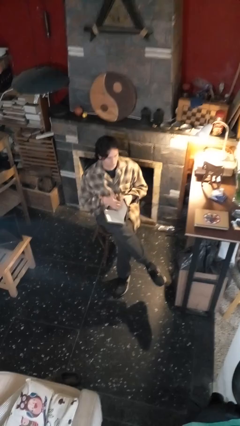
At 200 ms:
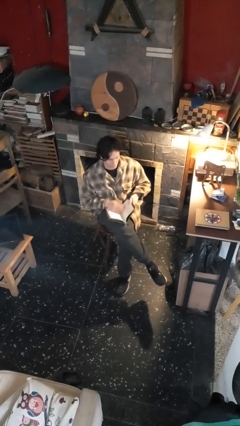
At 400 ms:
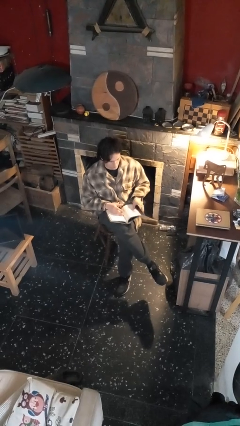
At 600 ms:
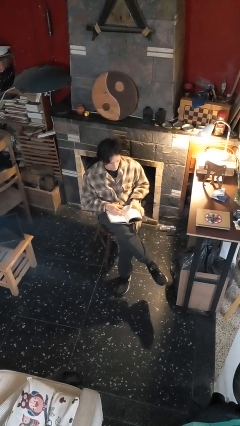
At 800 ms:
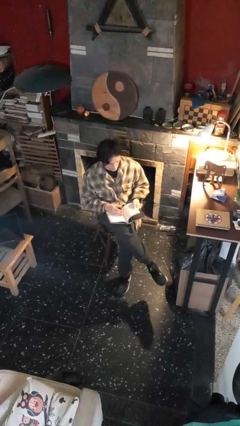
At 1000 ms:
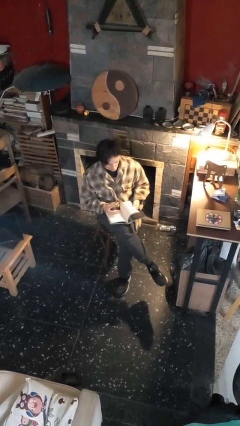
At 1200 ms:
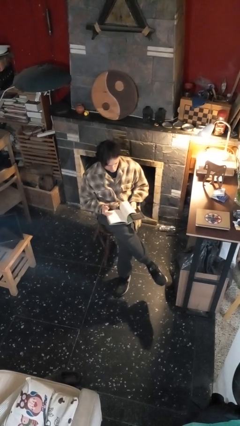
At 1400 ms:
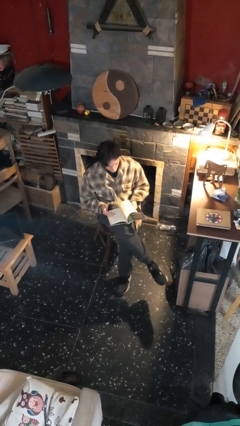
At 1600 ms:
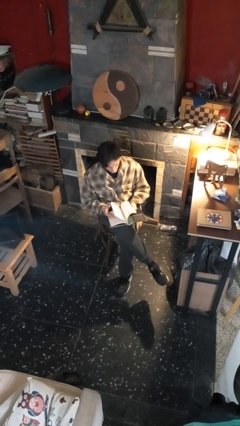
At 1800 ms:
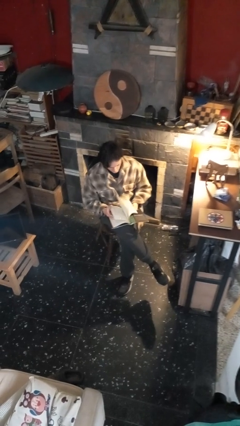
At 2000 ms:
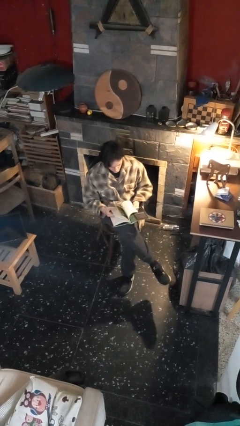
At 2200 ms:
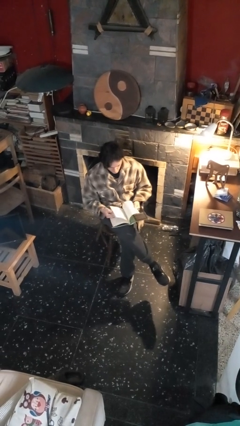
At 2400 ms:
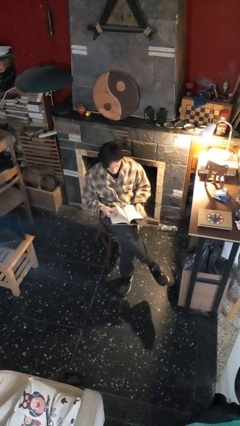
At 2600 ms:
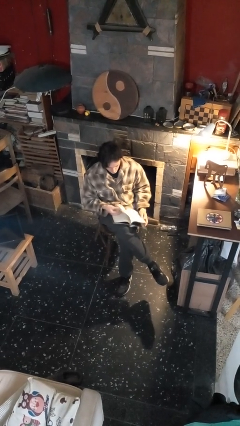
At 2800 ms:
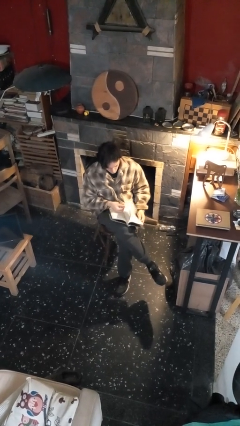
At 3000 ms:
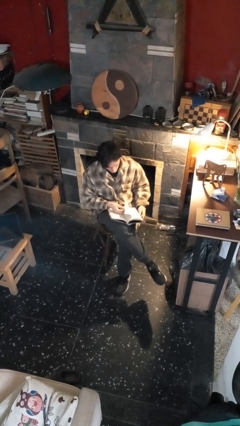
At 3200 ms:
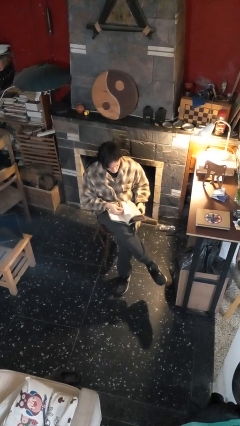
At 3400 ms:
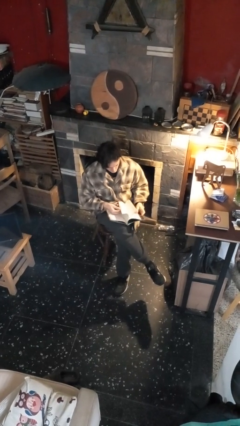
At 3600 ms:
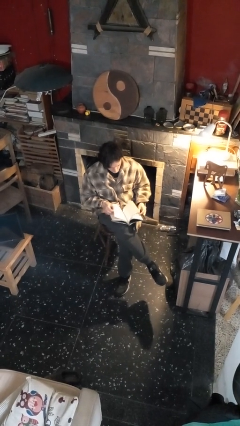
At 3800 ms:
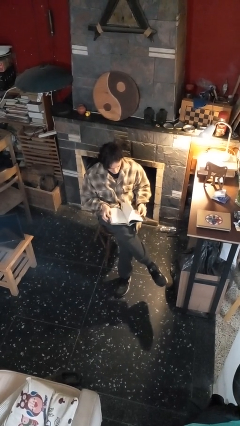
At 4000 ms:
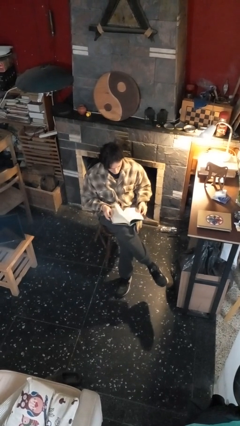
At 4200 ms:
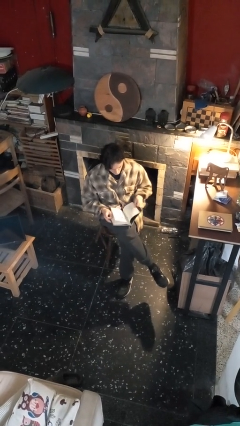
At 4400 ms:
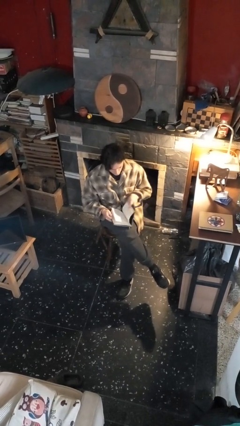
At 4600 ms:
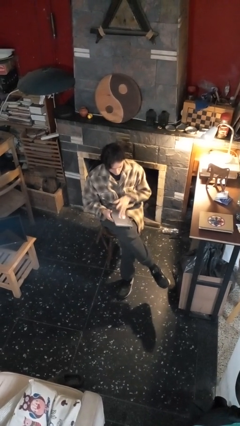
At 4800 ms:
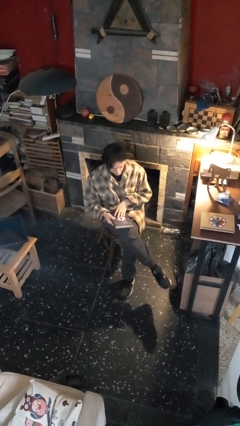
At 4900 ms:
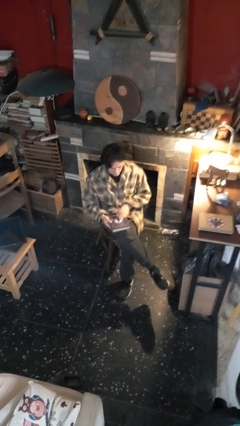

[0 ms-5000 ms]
person reads book

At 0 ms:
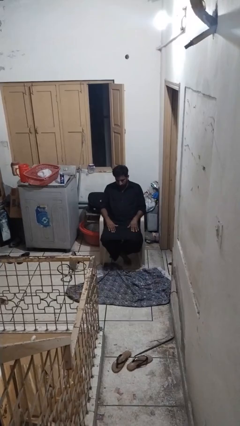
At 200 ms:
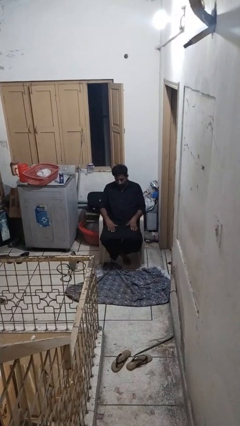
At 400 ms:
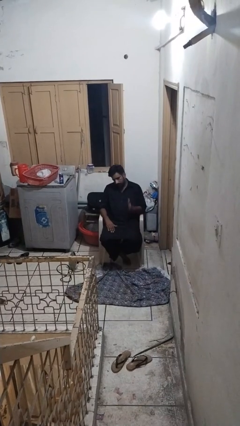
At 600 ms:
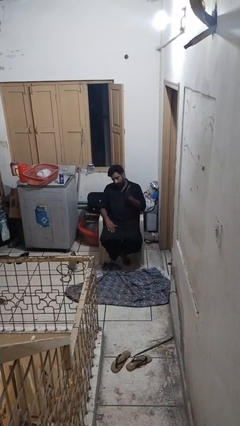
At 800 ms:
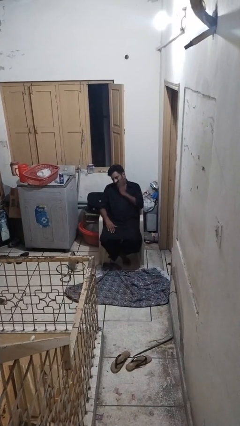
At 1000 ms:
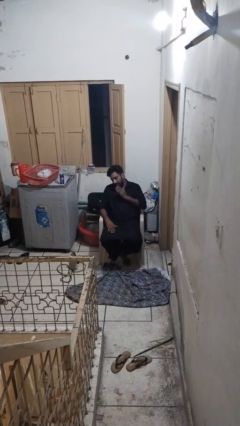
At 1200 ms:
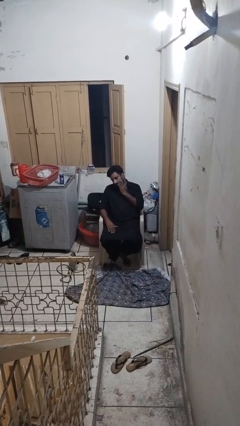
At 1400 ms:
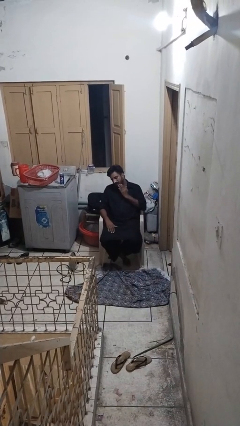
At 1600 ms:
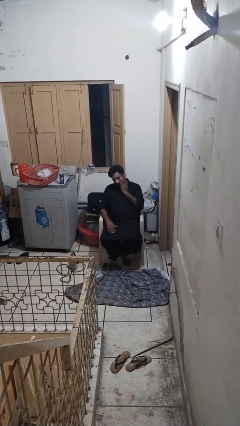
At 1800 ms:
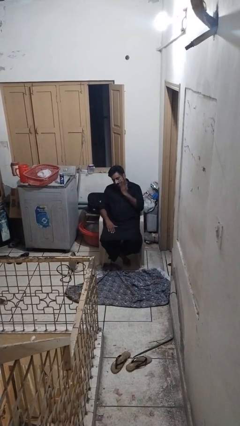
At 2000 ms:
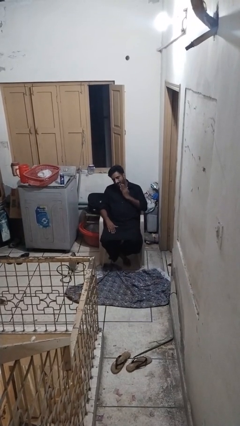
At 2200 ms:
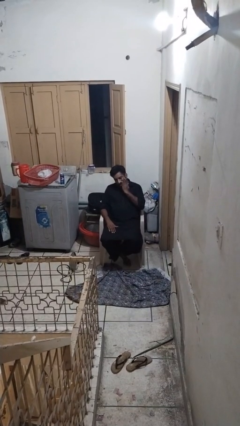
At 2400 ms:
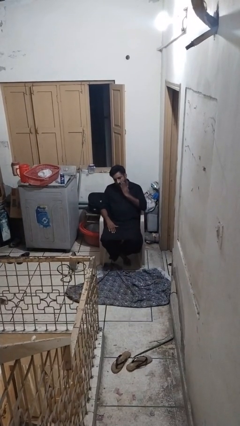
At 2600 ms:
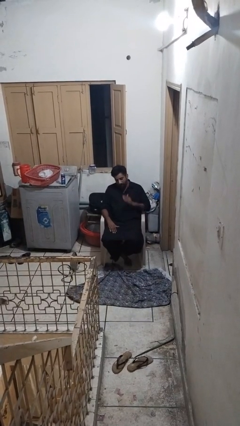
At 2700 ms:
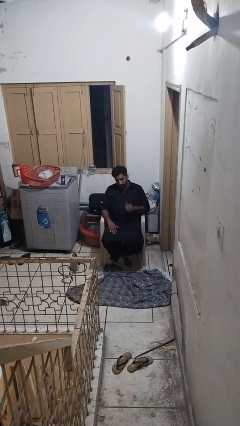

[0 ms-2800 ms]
person swats bug

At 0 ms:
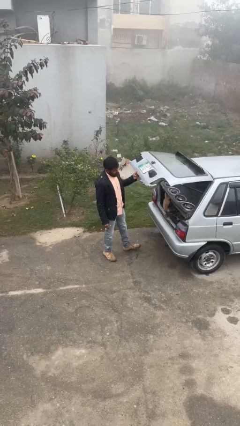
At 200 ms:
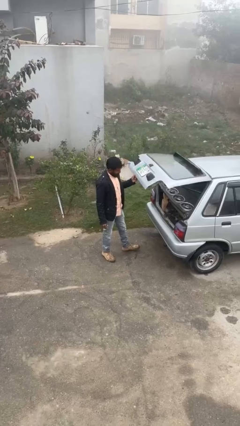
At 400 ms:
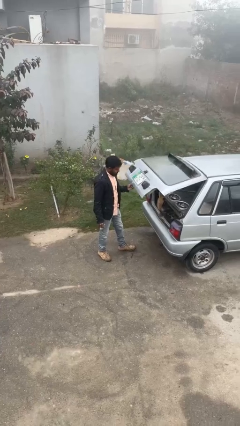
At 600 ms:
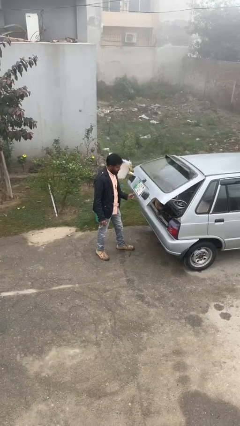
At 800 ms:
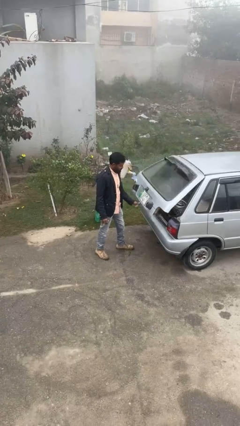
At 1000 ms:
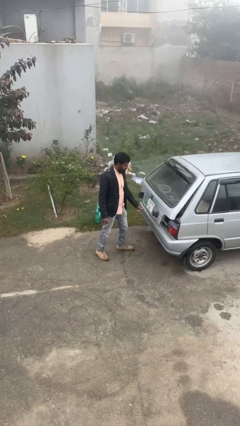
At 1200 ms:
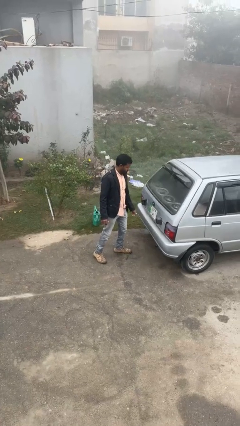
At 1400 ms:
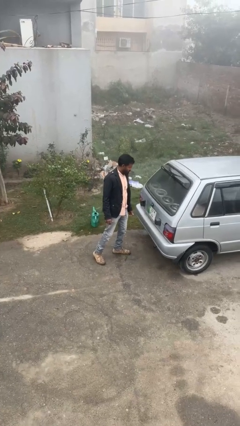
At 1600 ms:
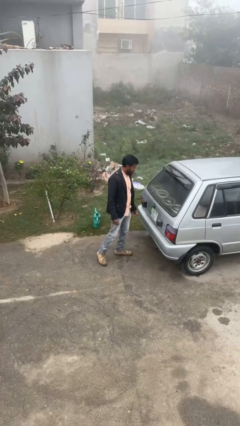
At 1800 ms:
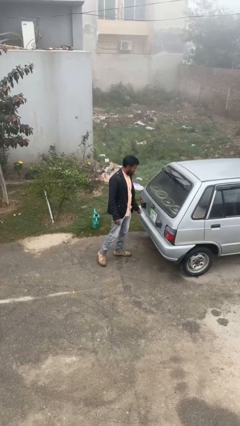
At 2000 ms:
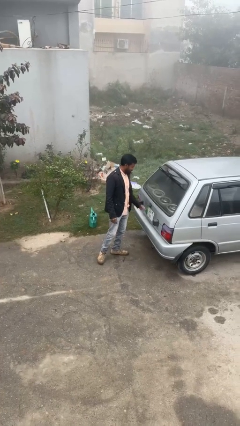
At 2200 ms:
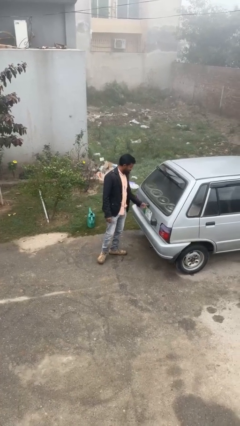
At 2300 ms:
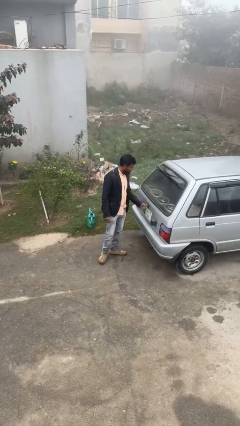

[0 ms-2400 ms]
person closes car trunk

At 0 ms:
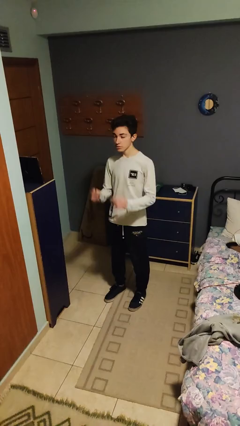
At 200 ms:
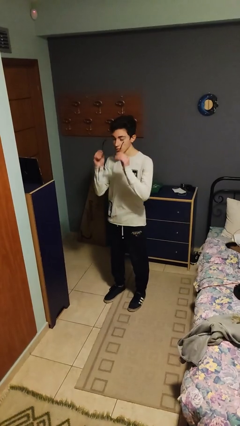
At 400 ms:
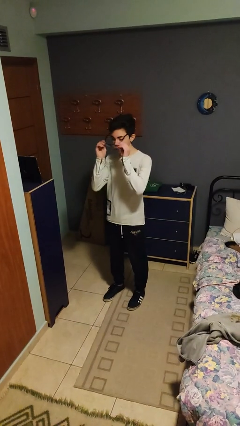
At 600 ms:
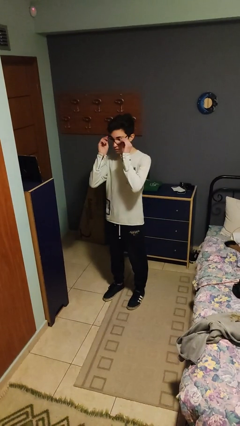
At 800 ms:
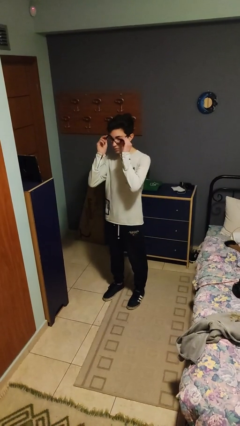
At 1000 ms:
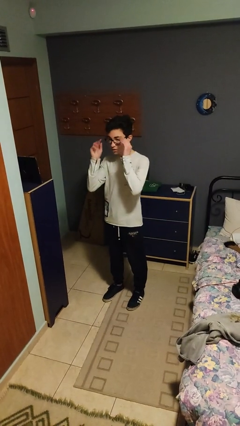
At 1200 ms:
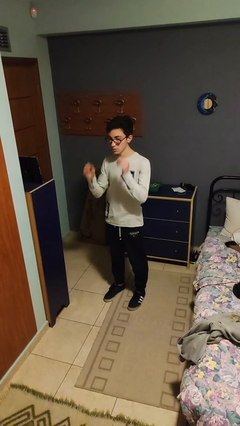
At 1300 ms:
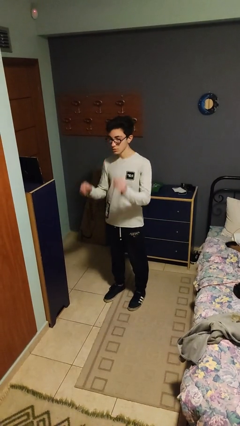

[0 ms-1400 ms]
person puts on glasses

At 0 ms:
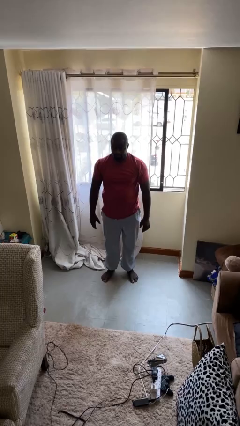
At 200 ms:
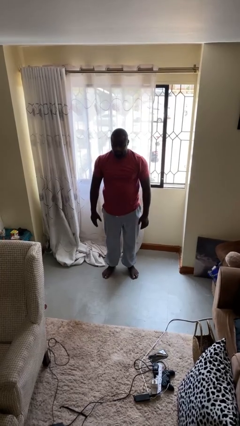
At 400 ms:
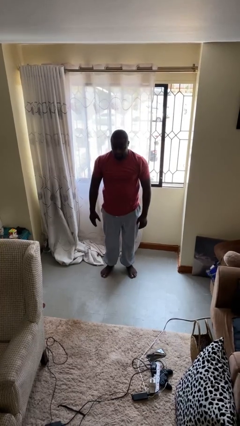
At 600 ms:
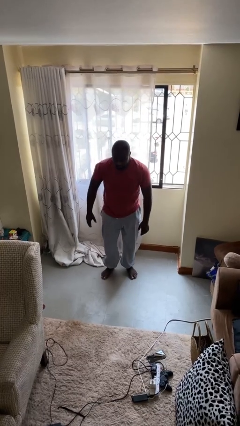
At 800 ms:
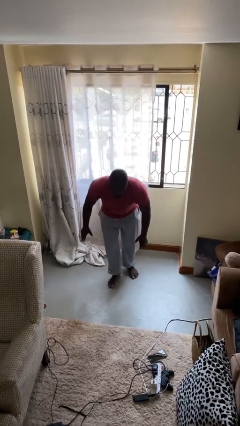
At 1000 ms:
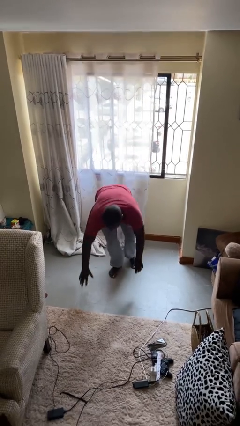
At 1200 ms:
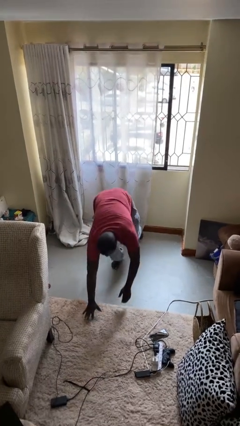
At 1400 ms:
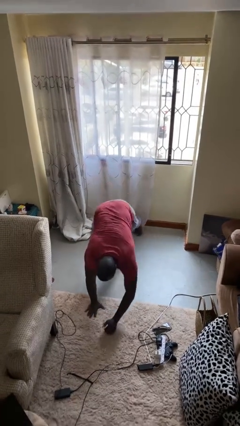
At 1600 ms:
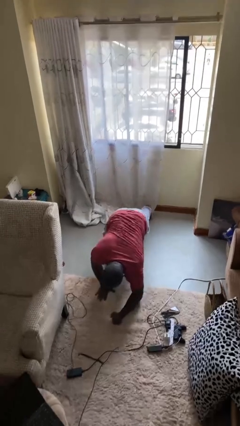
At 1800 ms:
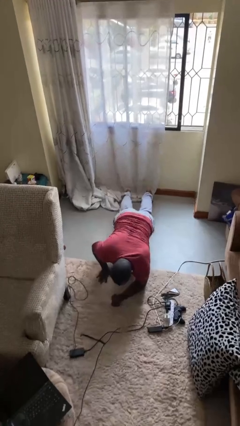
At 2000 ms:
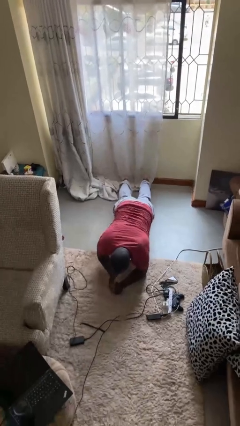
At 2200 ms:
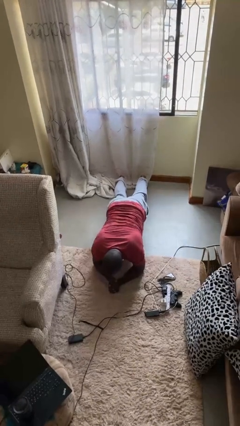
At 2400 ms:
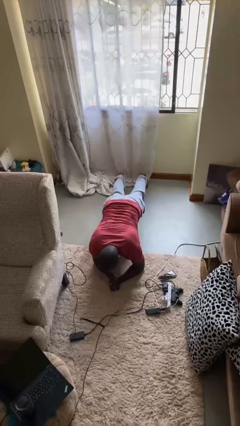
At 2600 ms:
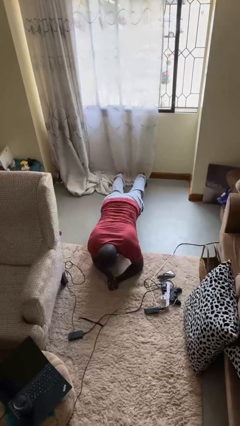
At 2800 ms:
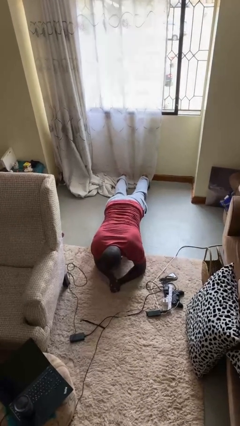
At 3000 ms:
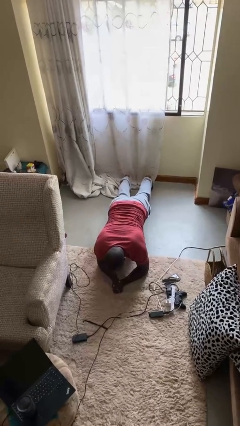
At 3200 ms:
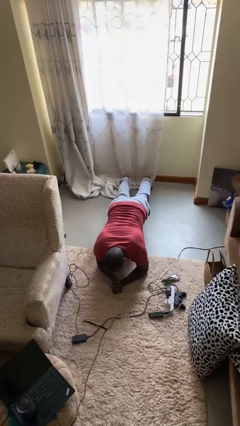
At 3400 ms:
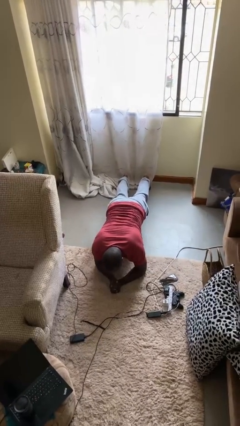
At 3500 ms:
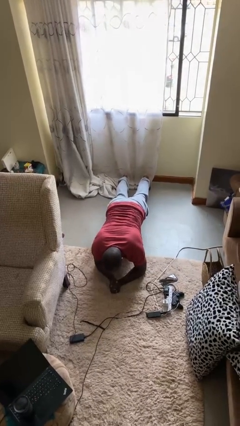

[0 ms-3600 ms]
person exercises with plank

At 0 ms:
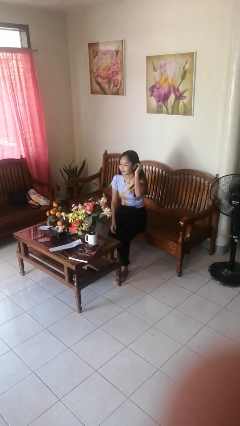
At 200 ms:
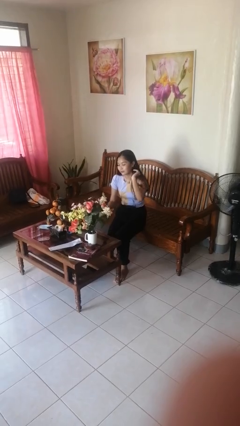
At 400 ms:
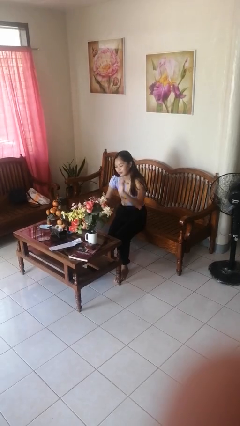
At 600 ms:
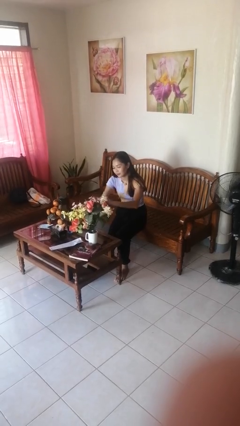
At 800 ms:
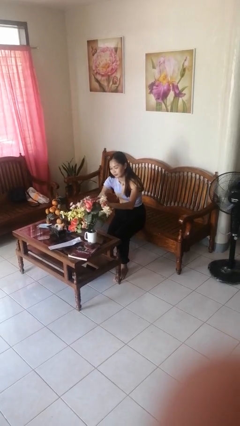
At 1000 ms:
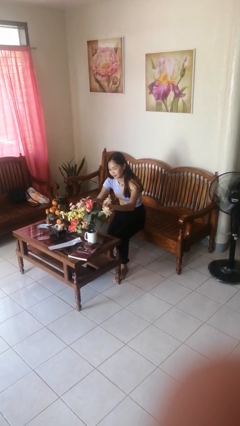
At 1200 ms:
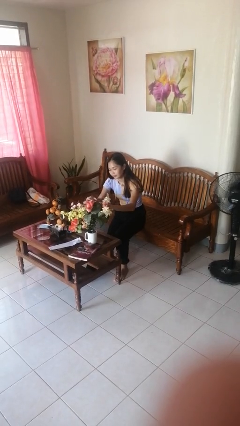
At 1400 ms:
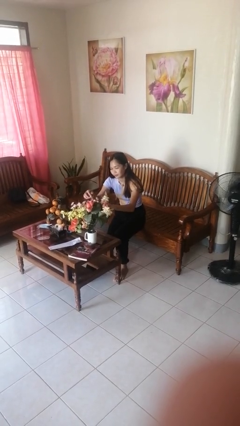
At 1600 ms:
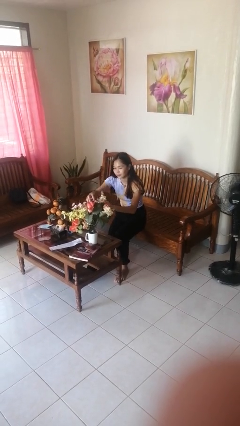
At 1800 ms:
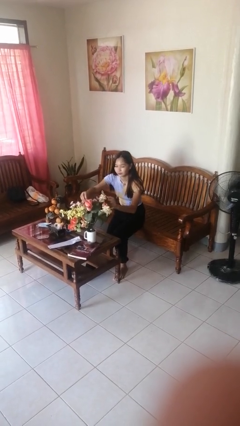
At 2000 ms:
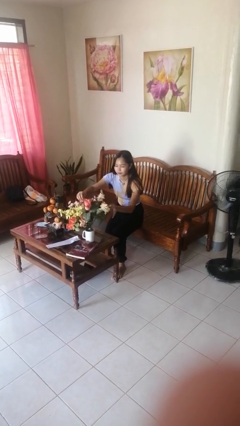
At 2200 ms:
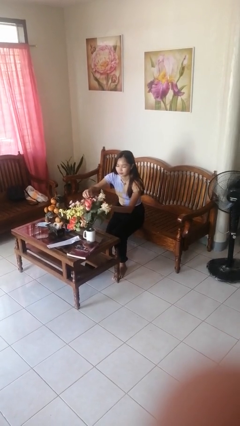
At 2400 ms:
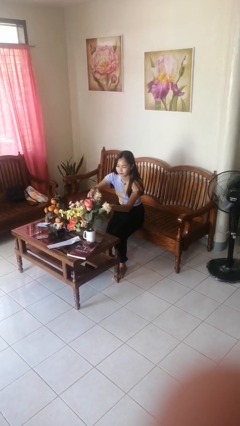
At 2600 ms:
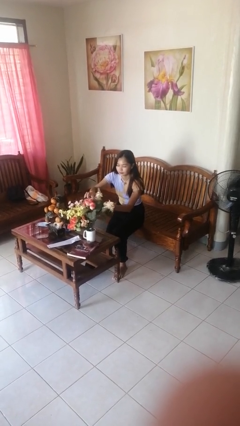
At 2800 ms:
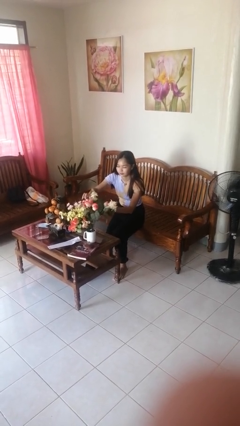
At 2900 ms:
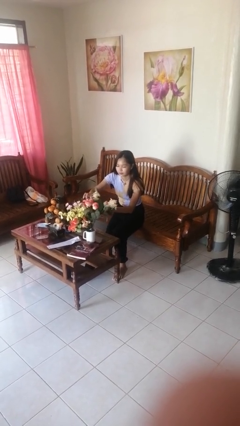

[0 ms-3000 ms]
person arranges flowers in vase
